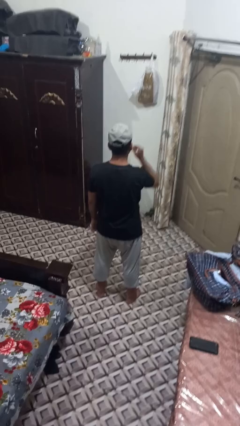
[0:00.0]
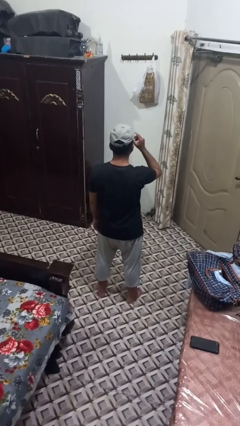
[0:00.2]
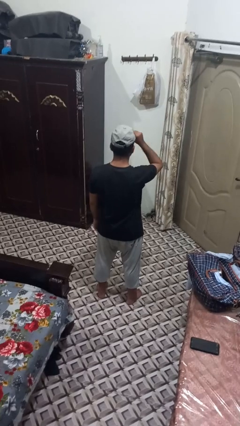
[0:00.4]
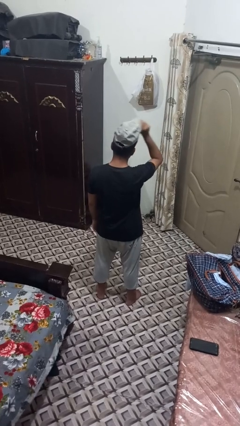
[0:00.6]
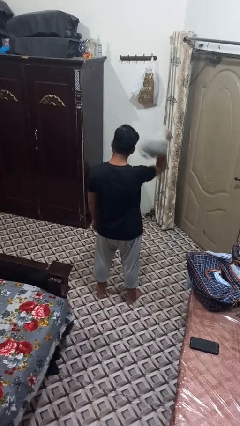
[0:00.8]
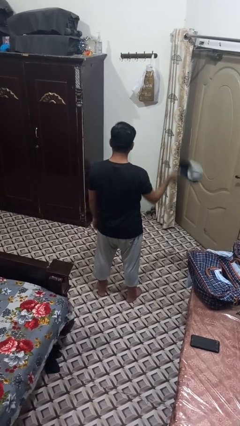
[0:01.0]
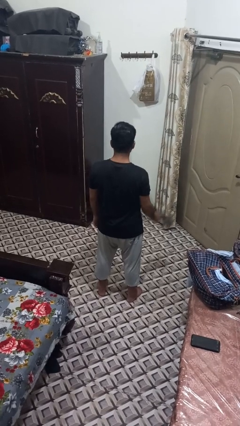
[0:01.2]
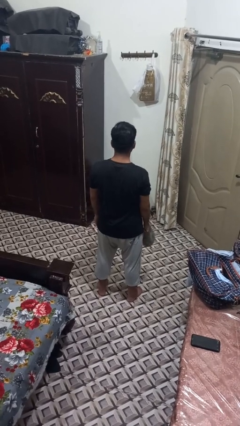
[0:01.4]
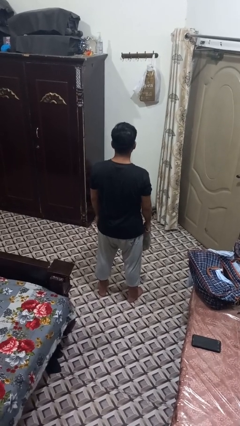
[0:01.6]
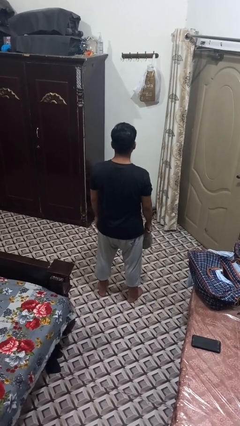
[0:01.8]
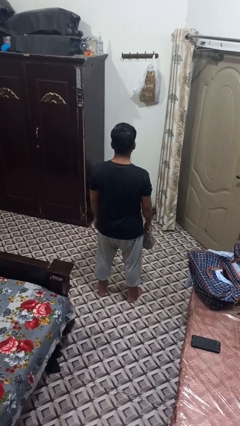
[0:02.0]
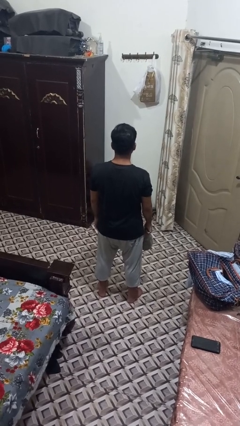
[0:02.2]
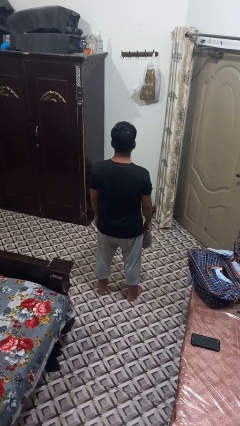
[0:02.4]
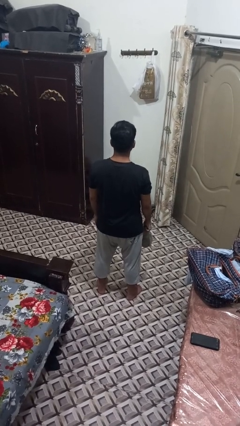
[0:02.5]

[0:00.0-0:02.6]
person takes off hat

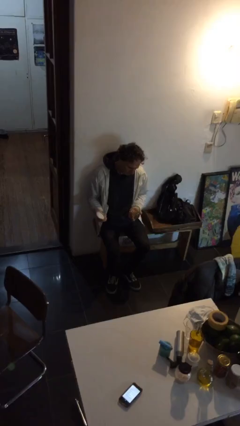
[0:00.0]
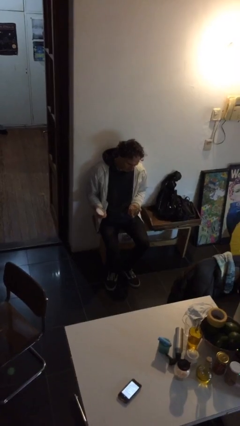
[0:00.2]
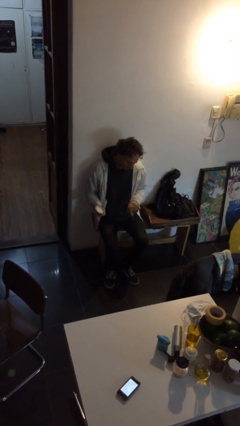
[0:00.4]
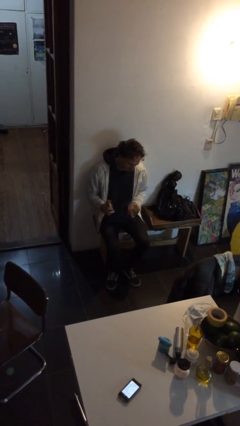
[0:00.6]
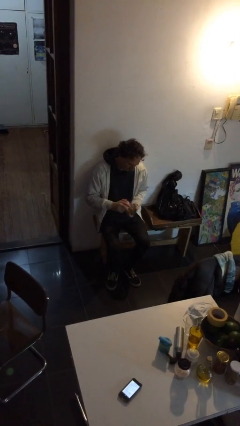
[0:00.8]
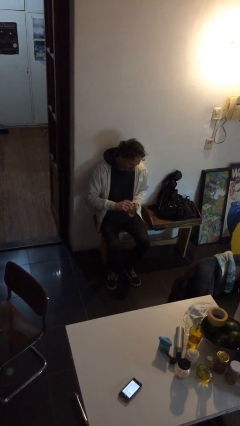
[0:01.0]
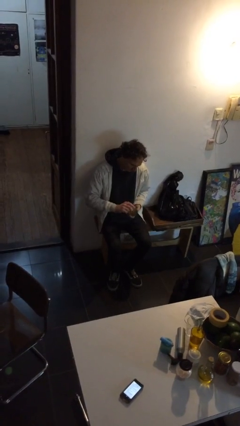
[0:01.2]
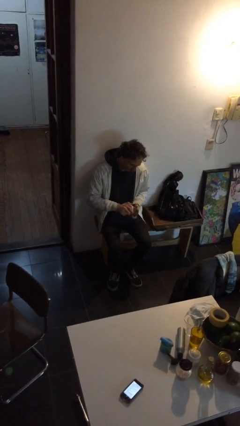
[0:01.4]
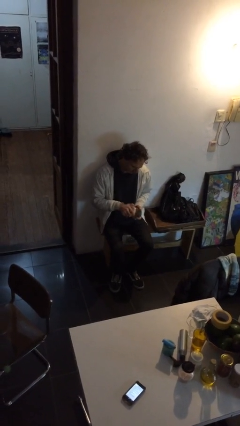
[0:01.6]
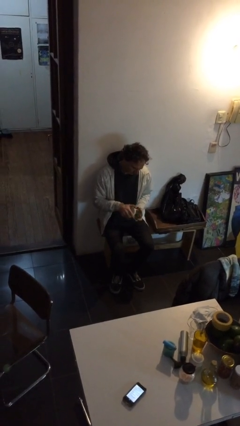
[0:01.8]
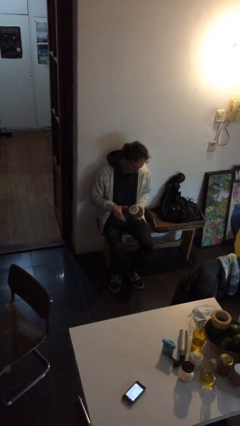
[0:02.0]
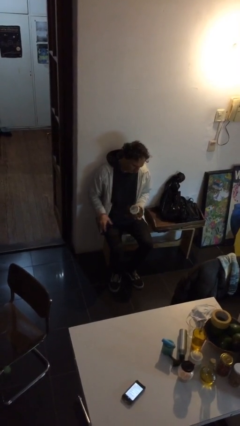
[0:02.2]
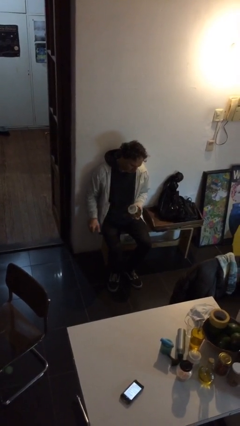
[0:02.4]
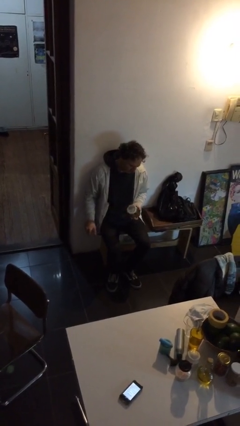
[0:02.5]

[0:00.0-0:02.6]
person closes jar

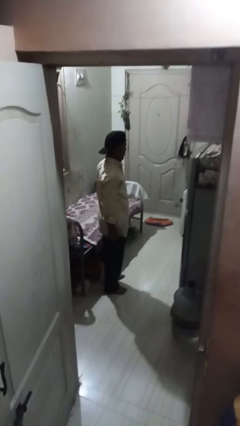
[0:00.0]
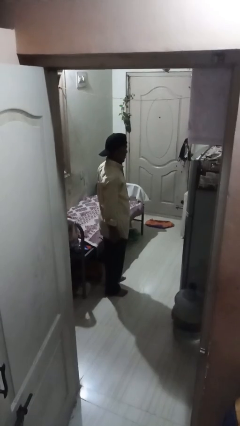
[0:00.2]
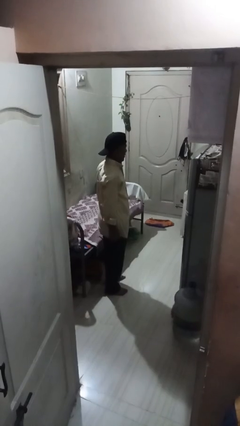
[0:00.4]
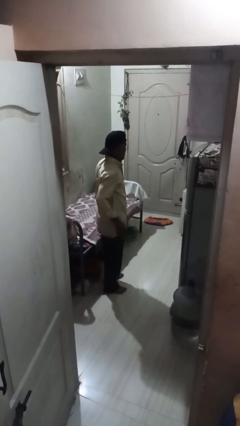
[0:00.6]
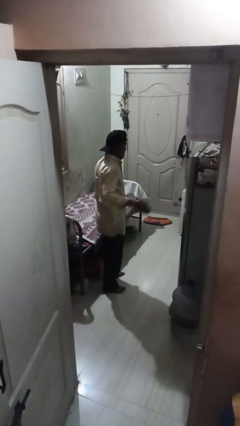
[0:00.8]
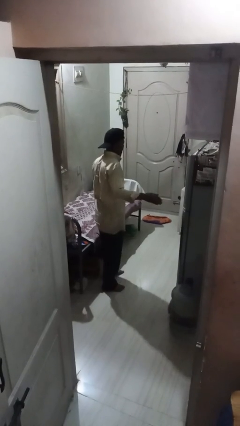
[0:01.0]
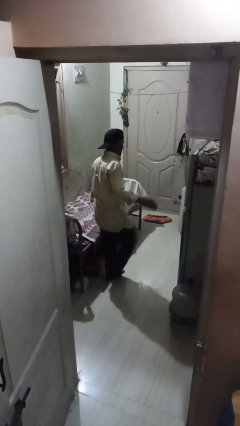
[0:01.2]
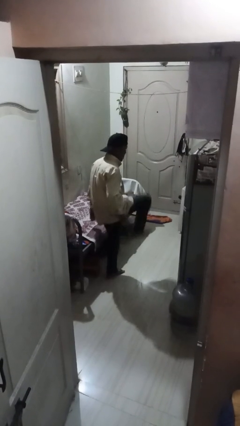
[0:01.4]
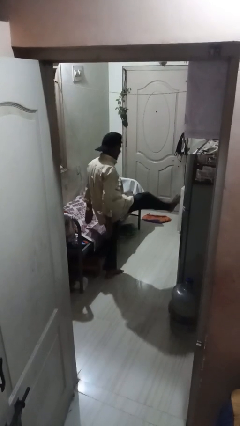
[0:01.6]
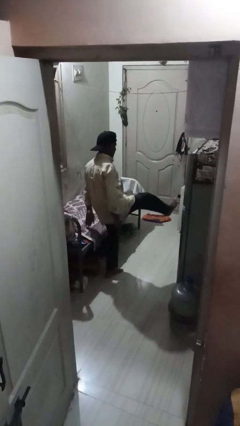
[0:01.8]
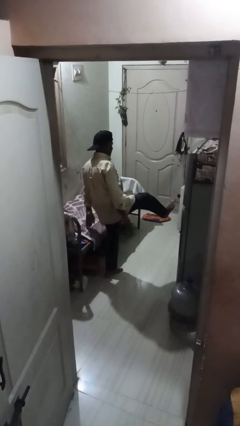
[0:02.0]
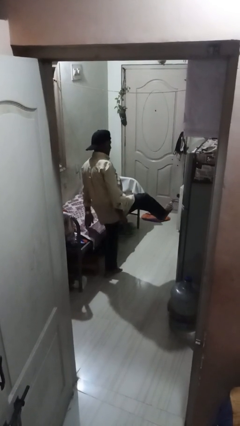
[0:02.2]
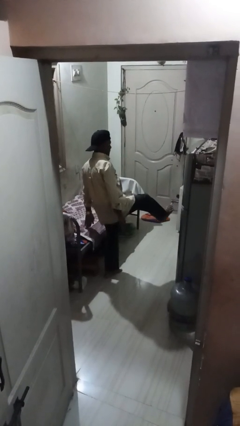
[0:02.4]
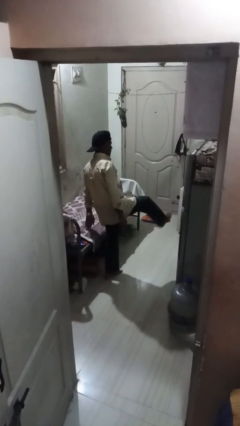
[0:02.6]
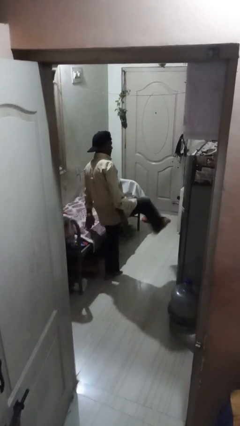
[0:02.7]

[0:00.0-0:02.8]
person karate kicks

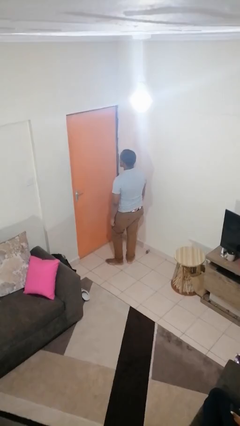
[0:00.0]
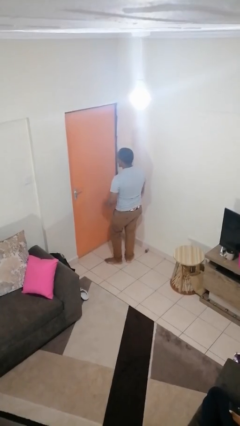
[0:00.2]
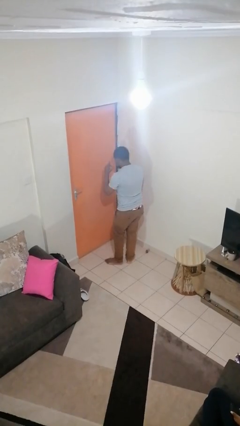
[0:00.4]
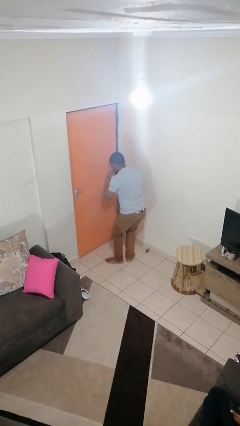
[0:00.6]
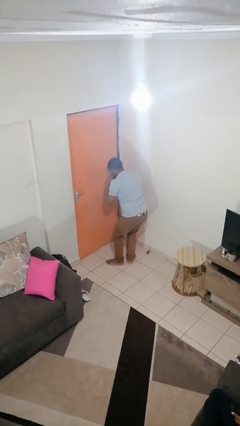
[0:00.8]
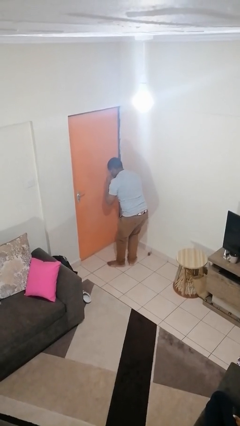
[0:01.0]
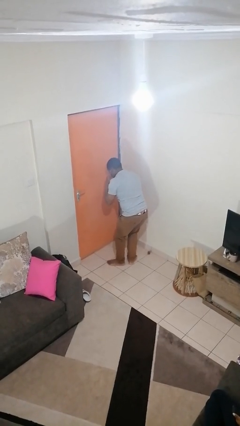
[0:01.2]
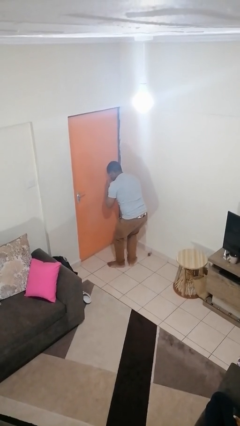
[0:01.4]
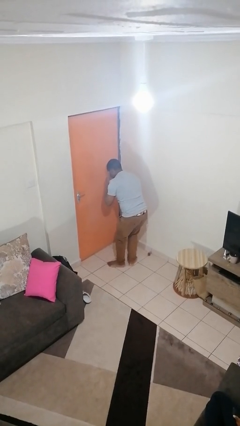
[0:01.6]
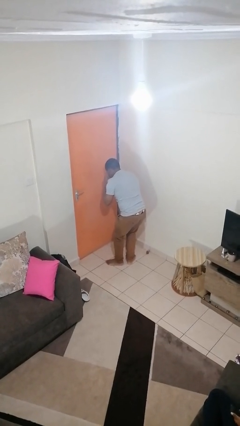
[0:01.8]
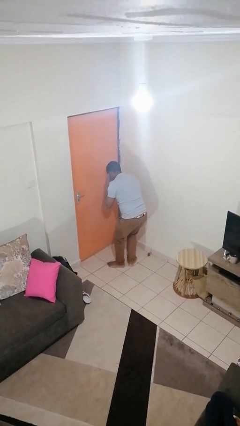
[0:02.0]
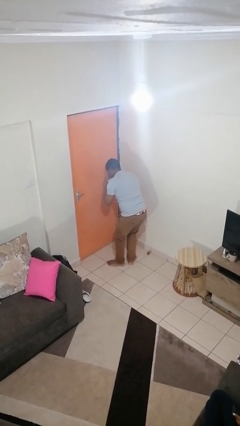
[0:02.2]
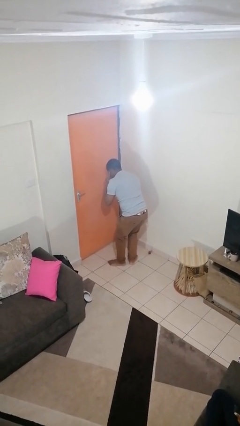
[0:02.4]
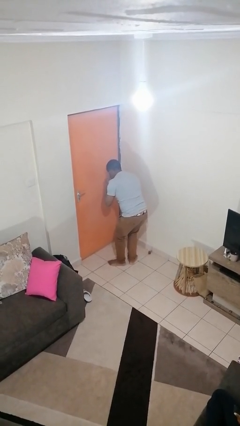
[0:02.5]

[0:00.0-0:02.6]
person gestures listen closely

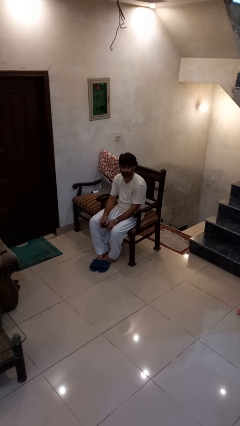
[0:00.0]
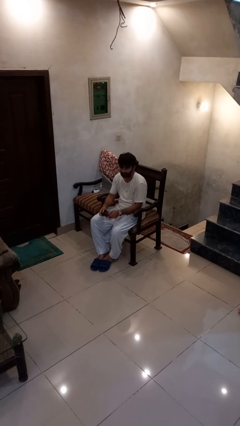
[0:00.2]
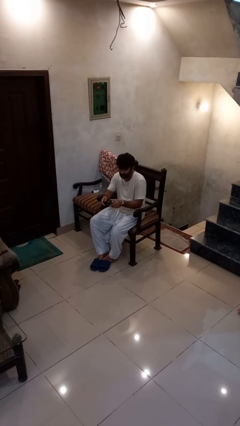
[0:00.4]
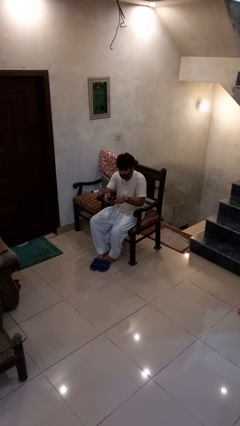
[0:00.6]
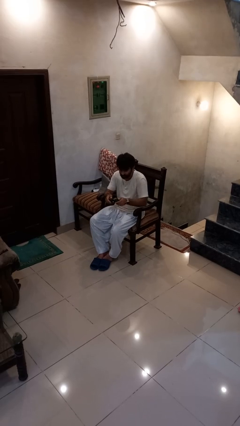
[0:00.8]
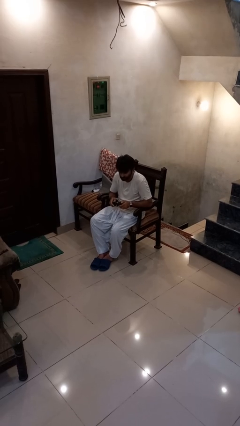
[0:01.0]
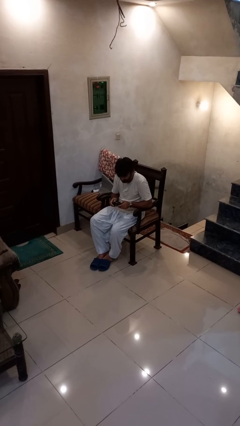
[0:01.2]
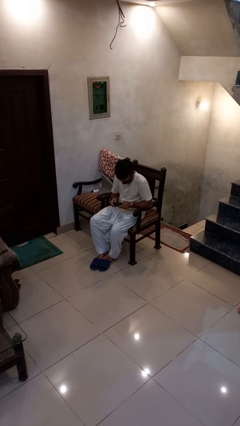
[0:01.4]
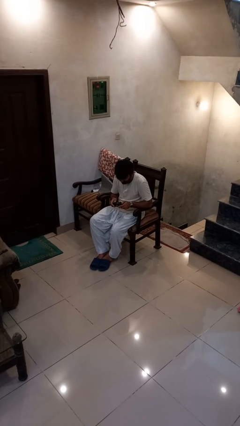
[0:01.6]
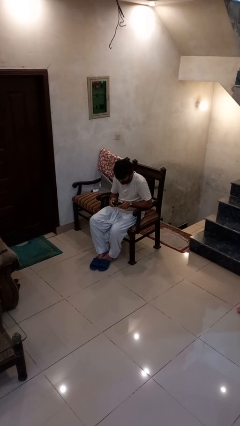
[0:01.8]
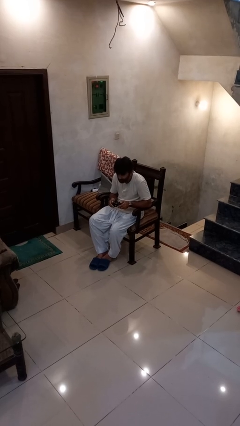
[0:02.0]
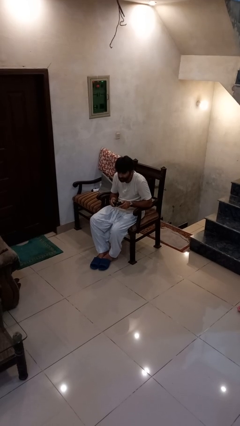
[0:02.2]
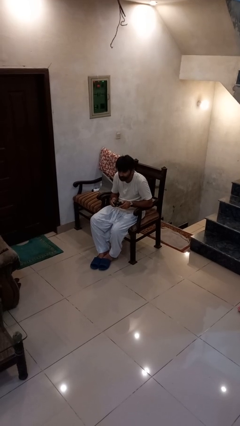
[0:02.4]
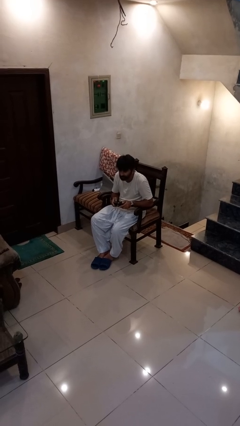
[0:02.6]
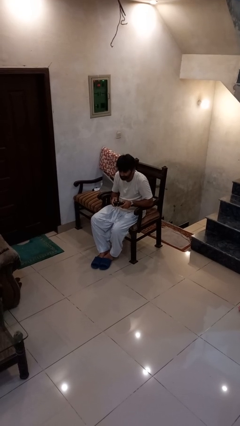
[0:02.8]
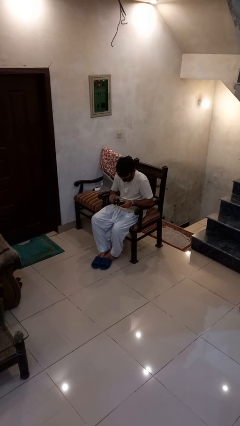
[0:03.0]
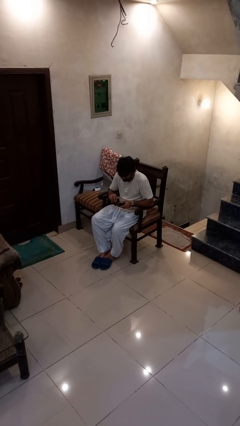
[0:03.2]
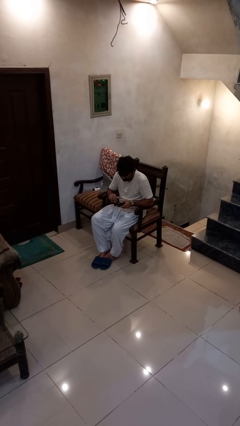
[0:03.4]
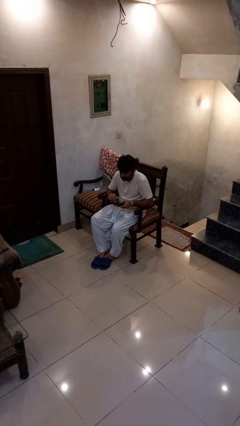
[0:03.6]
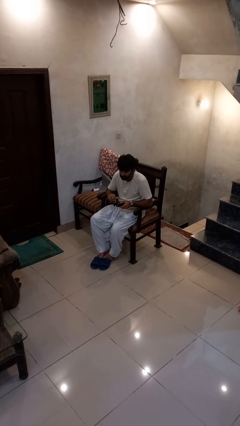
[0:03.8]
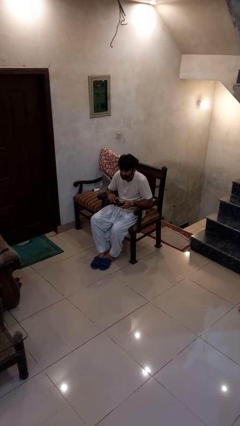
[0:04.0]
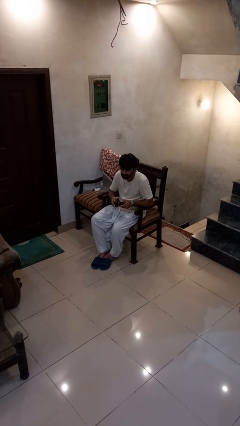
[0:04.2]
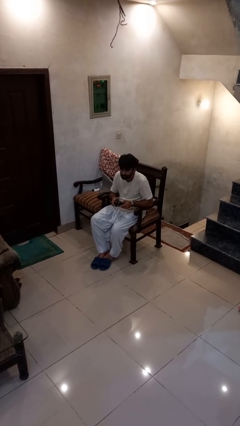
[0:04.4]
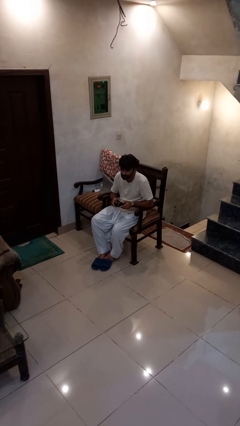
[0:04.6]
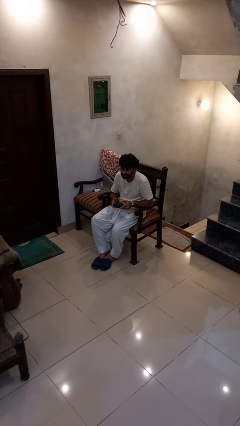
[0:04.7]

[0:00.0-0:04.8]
person interacts with handheld game

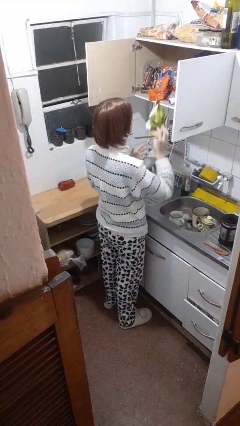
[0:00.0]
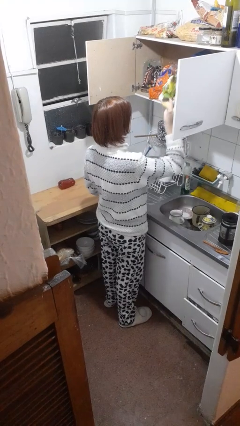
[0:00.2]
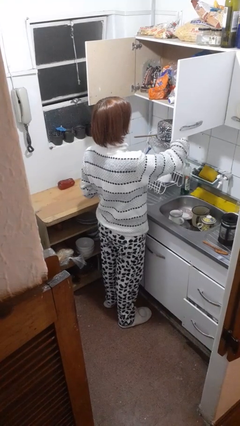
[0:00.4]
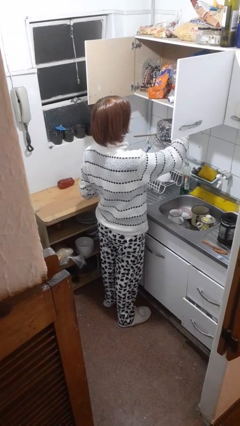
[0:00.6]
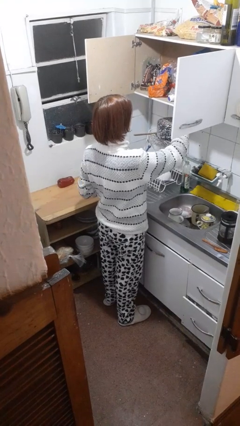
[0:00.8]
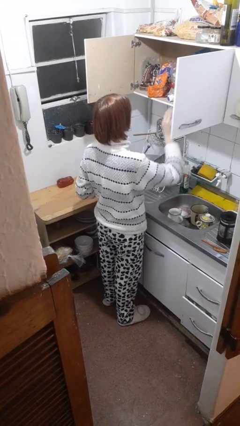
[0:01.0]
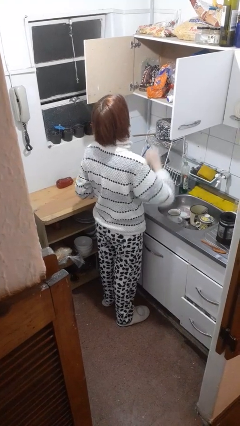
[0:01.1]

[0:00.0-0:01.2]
person puts object in cabinet

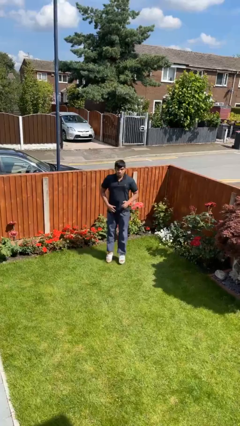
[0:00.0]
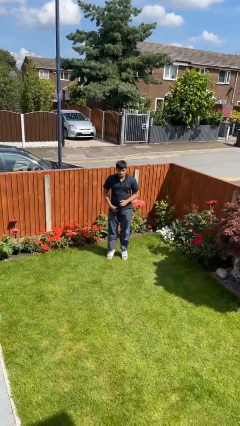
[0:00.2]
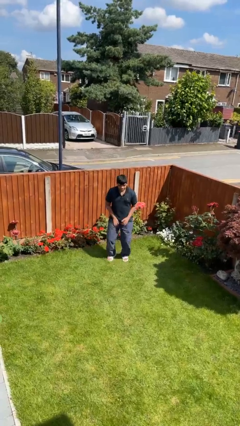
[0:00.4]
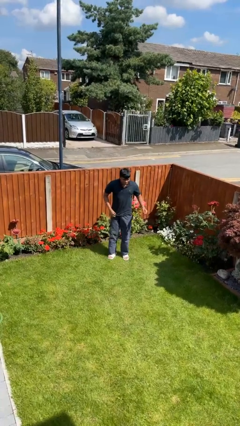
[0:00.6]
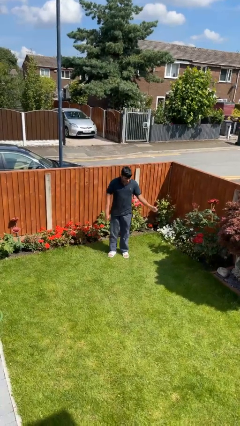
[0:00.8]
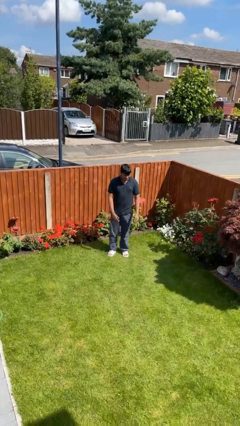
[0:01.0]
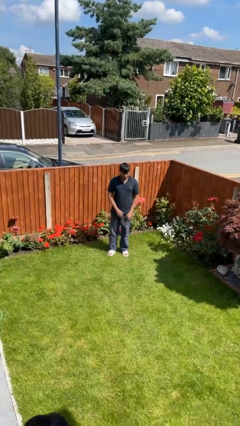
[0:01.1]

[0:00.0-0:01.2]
person jumps
